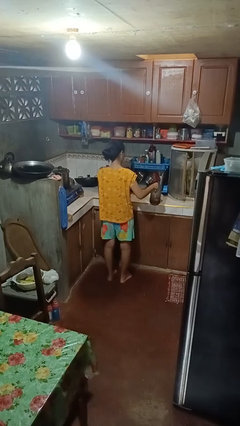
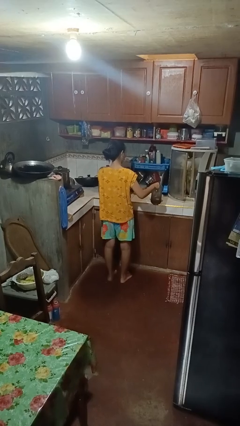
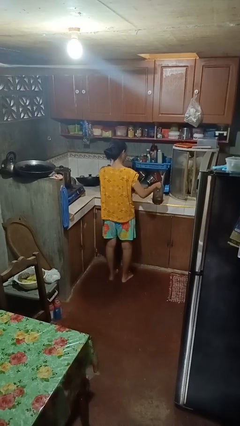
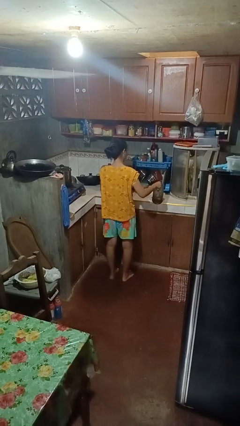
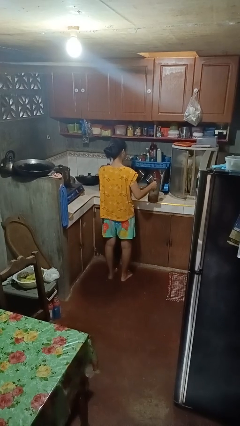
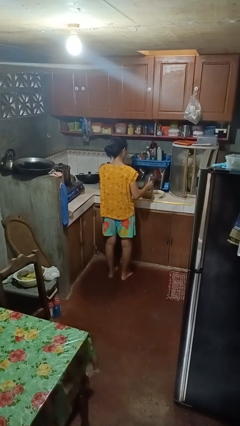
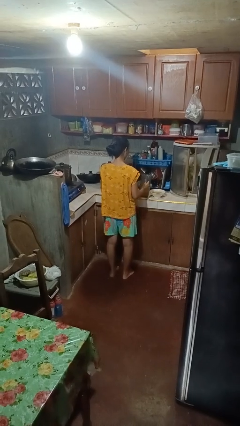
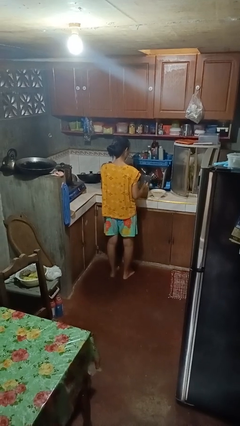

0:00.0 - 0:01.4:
person pours into bowl

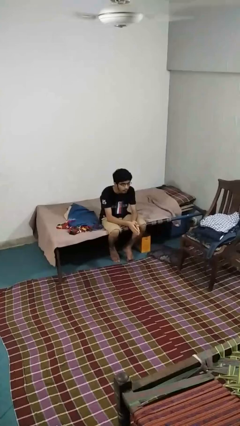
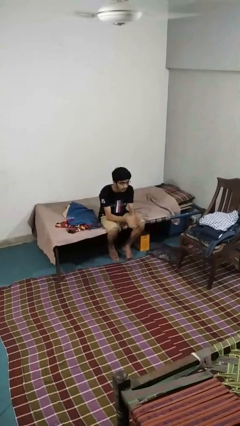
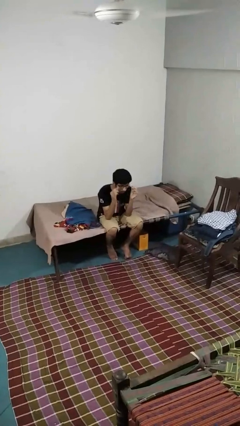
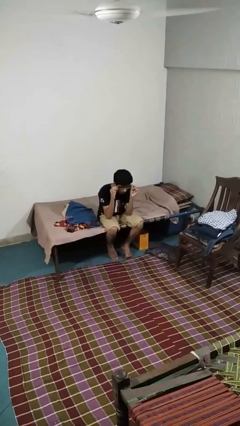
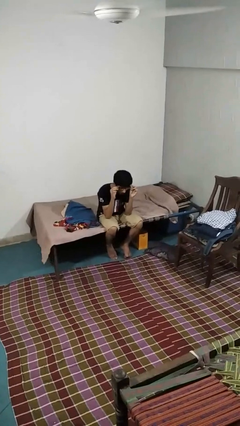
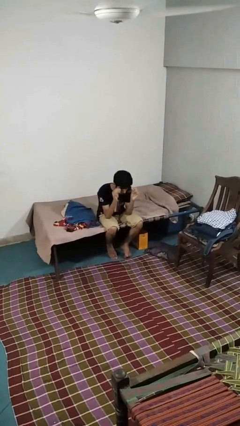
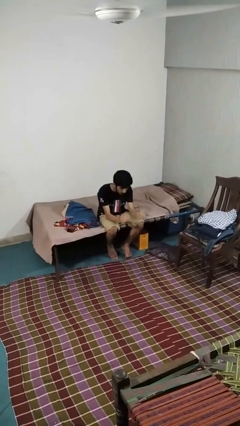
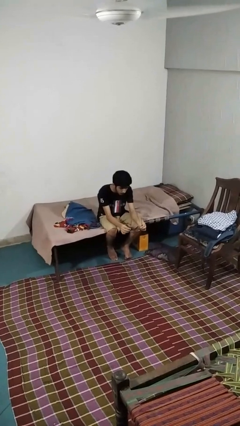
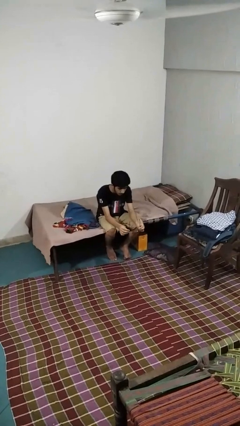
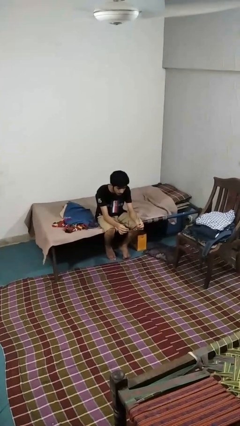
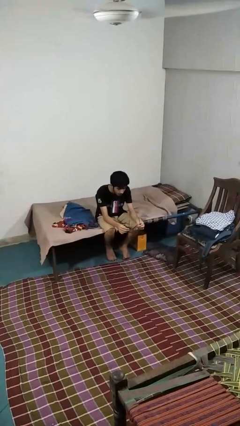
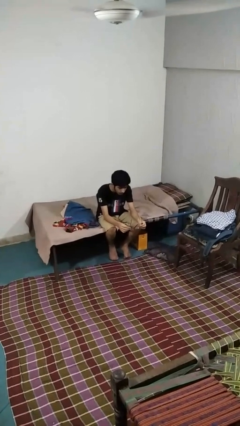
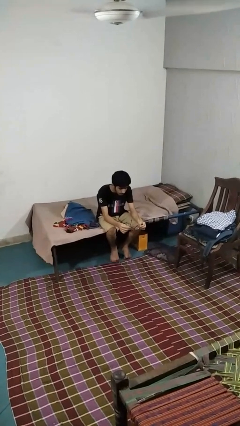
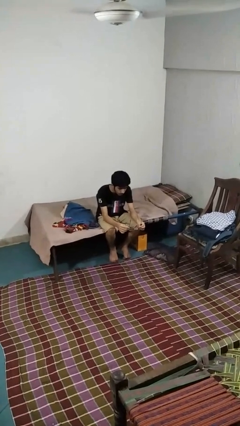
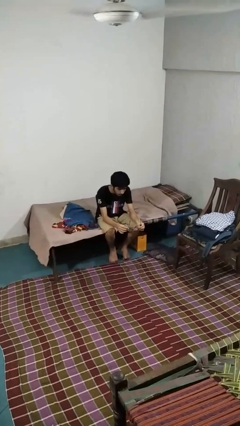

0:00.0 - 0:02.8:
person takes off glasses

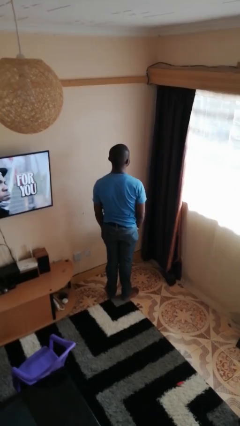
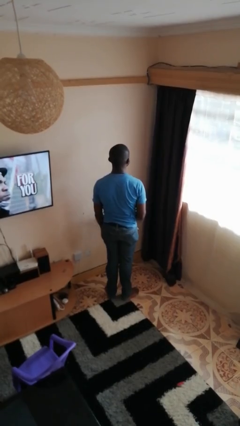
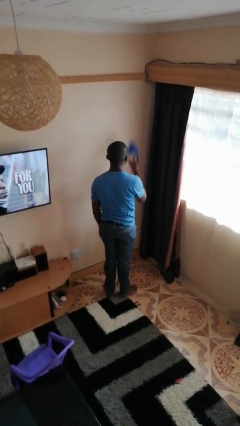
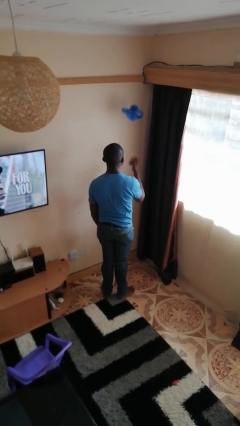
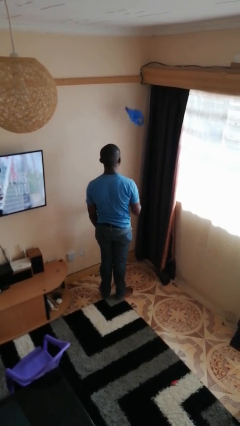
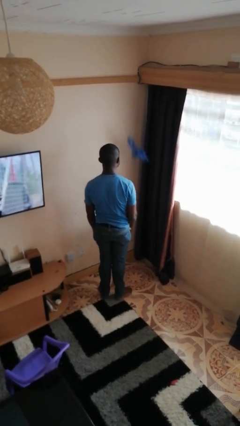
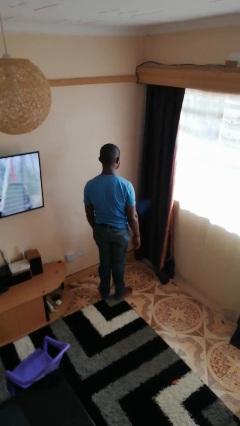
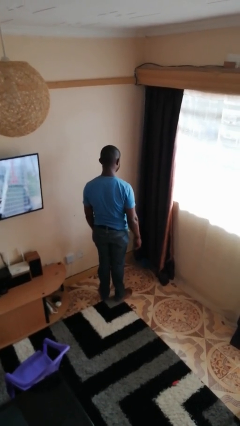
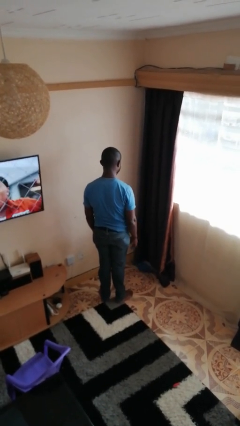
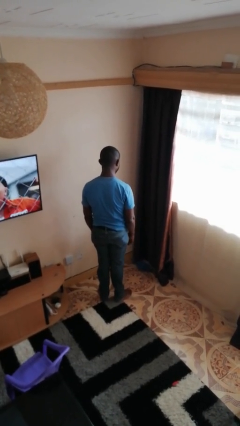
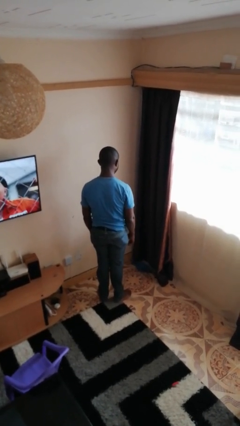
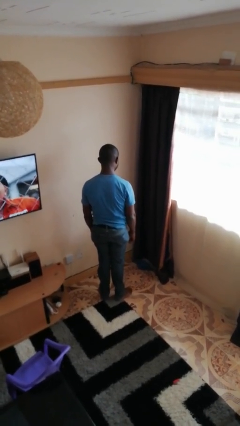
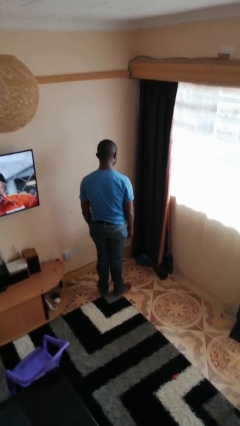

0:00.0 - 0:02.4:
person throws object into air

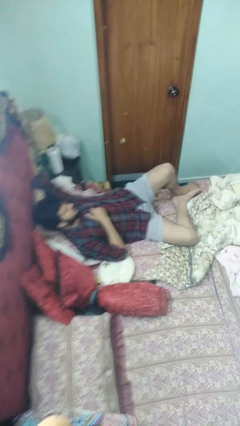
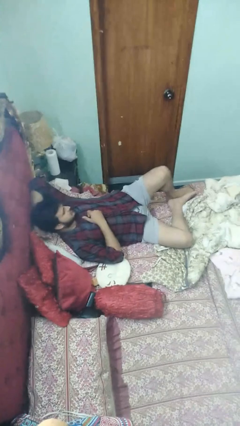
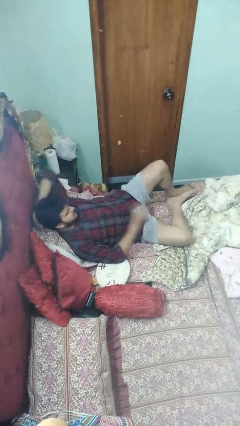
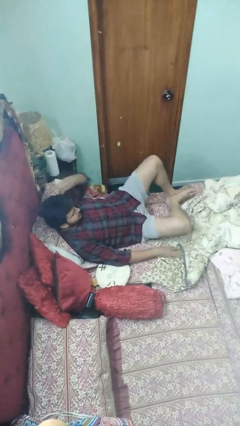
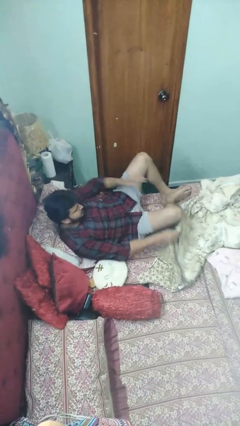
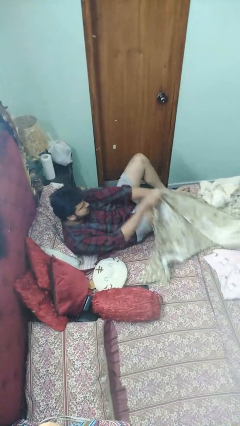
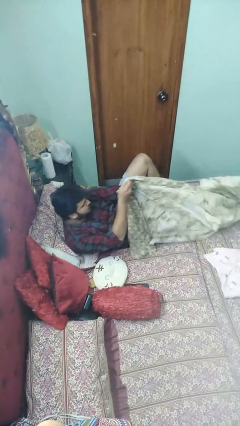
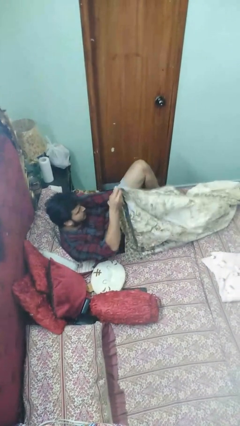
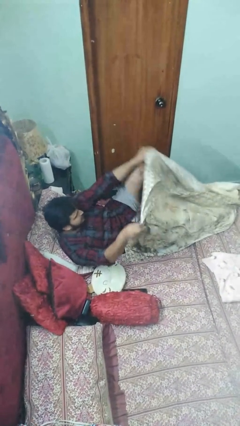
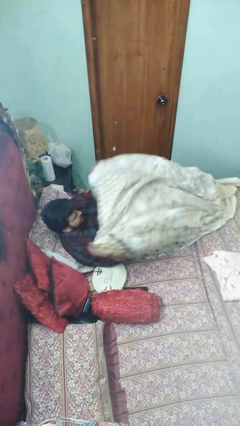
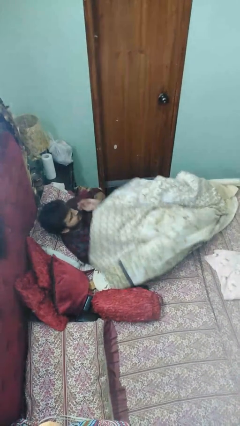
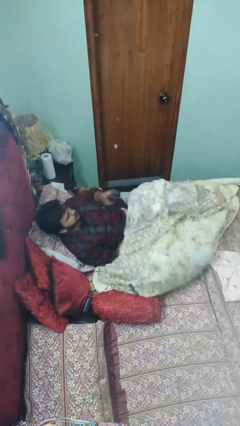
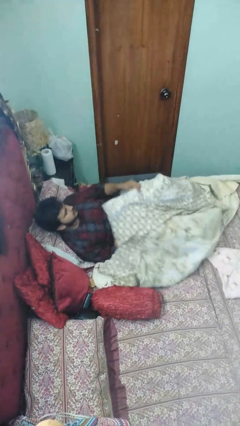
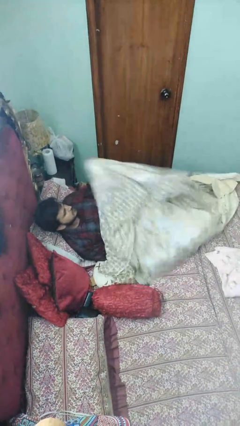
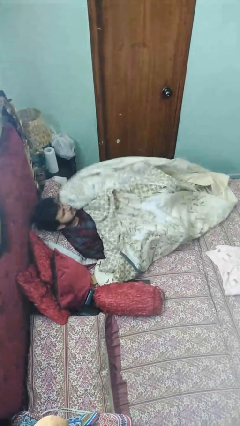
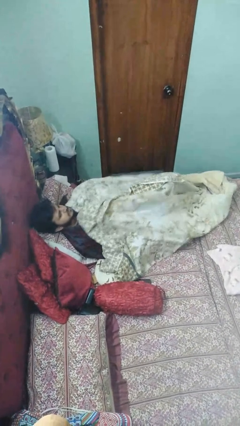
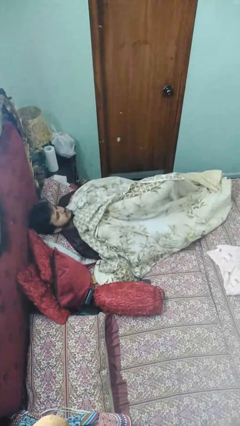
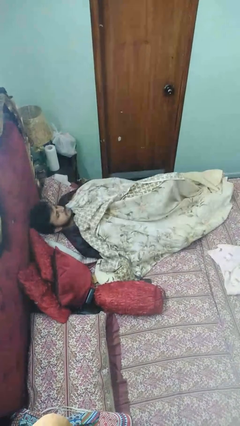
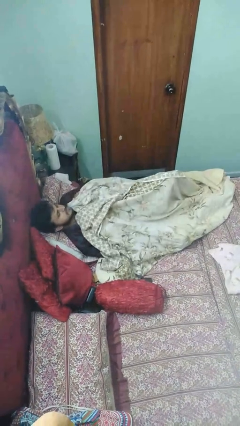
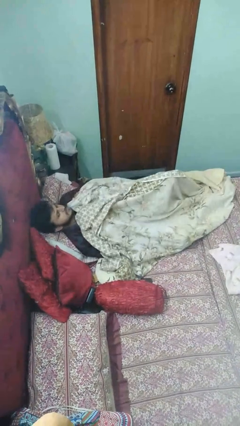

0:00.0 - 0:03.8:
person covers with bedsheets

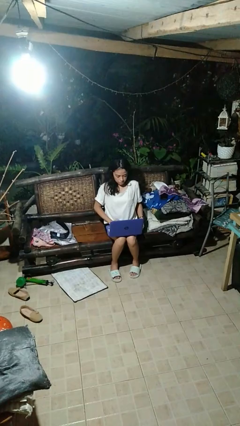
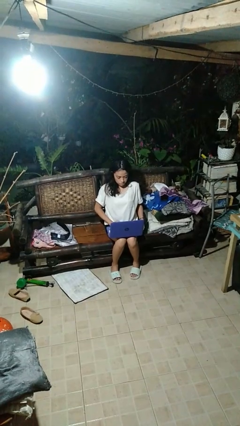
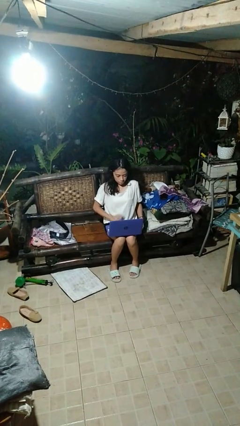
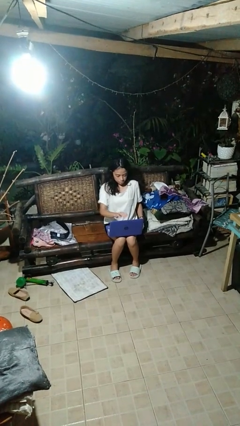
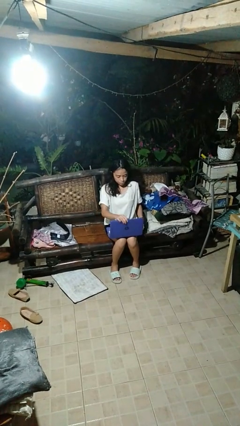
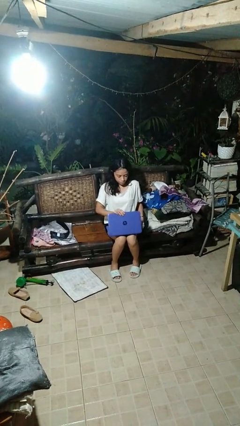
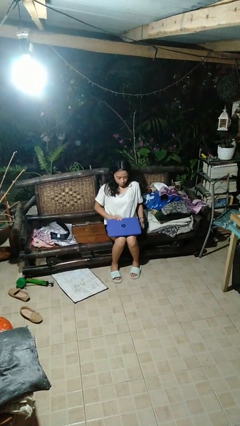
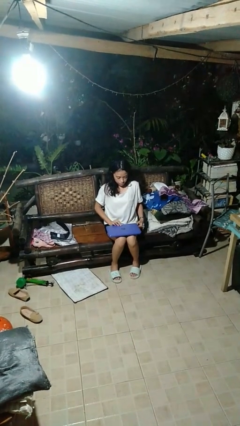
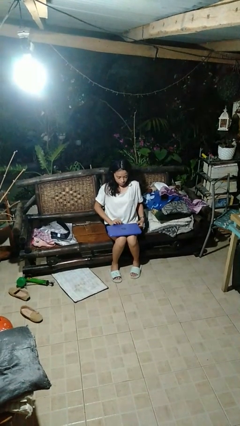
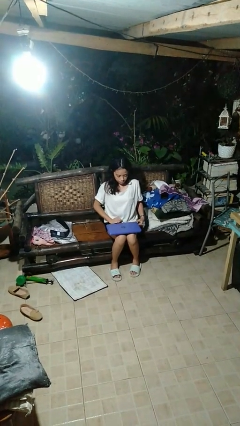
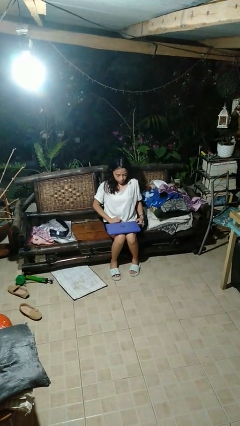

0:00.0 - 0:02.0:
person closes laptop

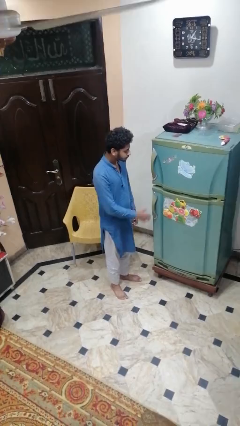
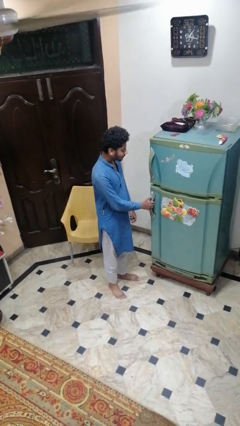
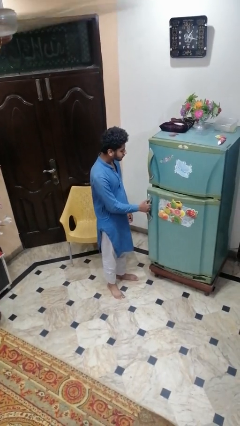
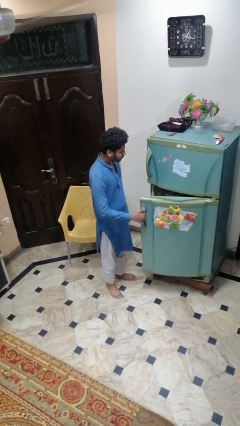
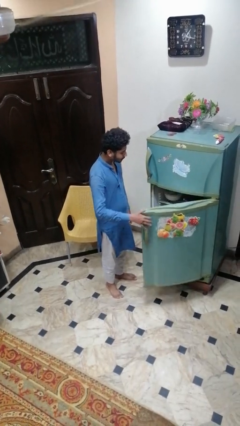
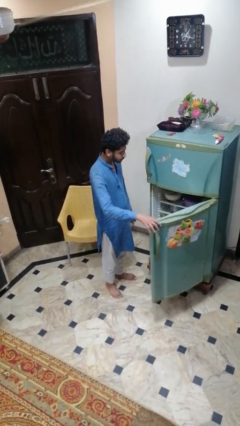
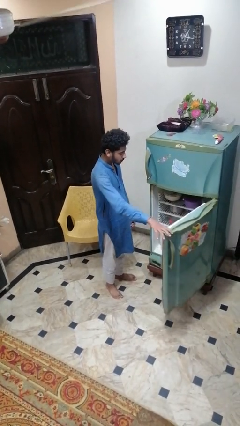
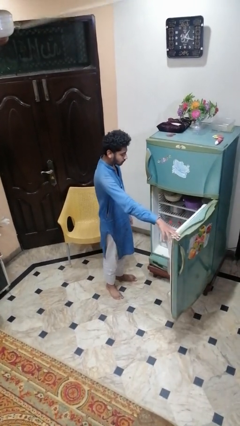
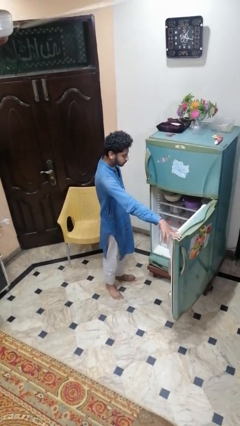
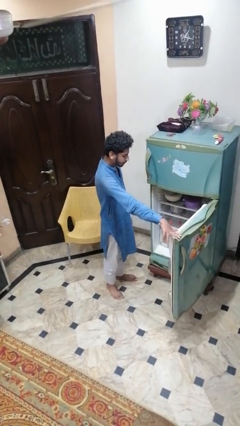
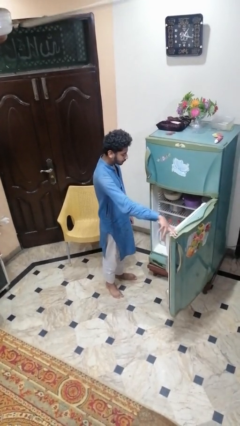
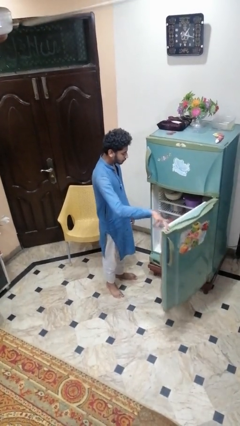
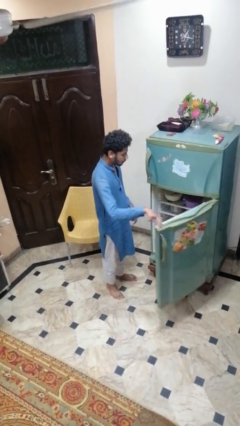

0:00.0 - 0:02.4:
person opens refrigerator

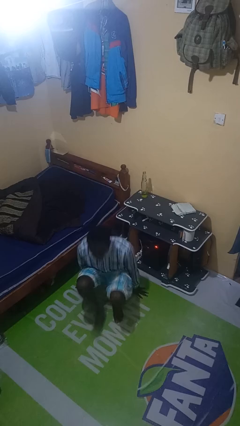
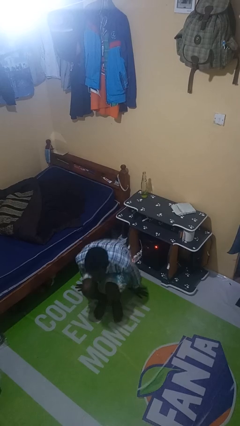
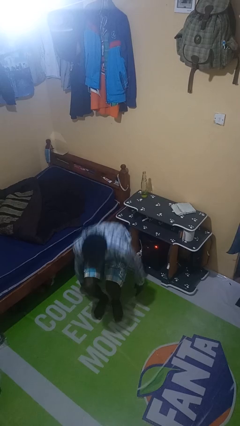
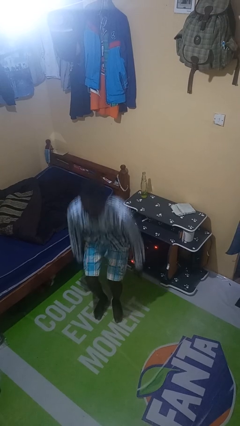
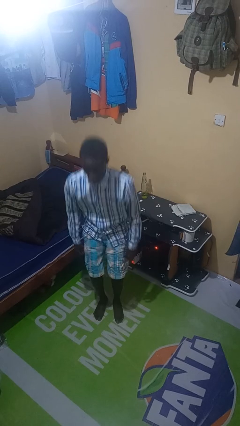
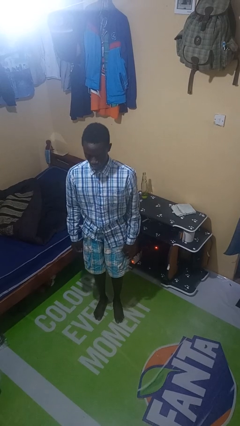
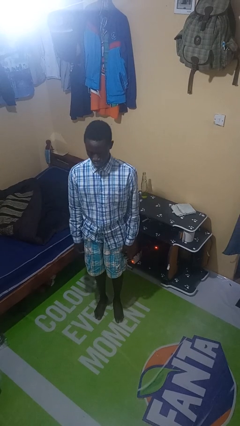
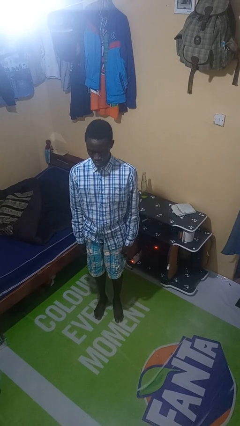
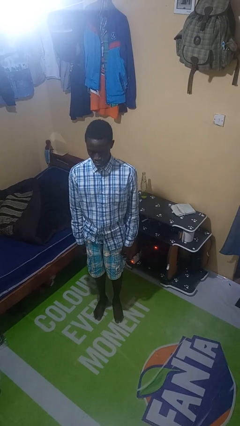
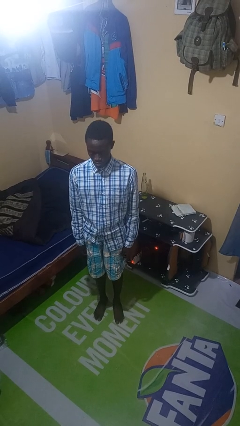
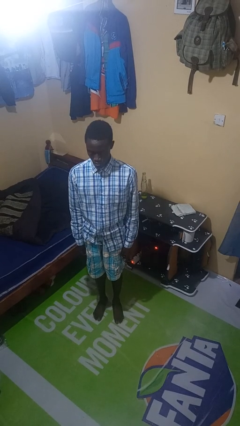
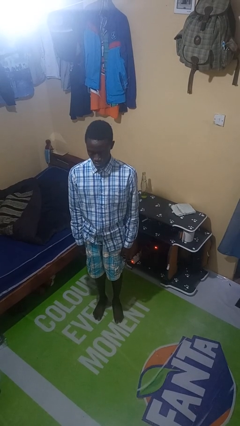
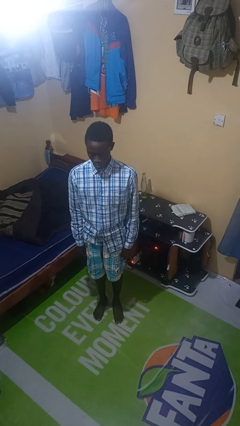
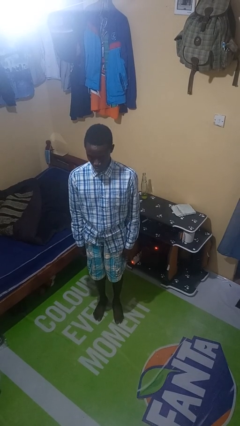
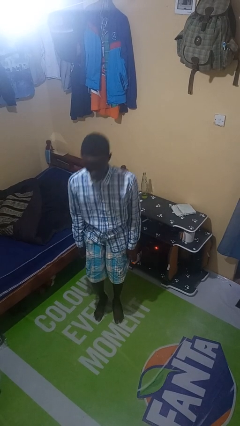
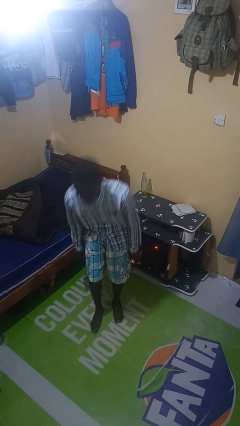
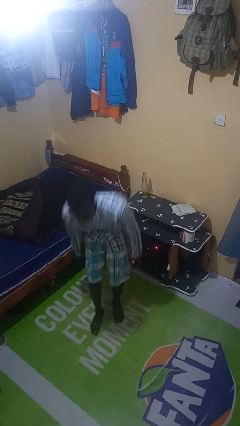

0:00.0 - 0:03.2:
person stands up from floor
